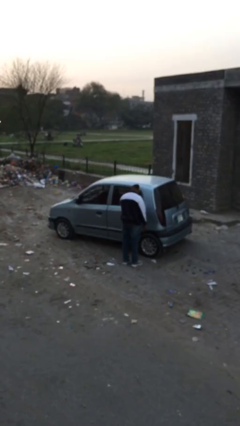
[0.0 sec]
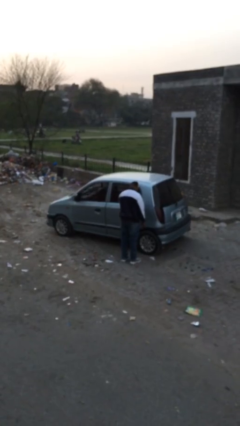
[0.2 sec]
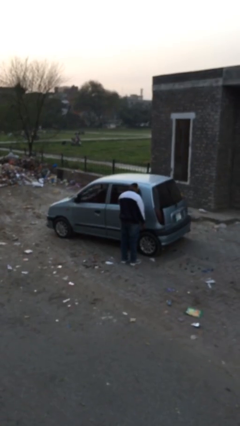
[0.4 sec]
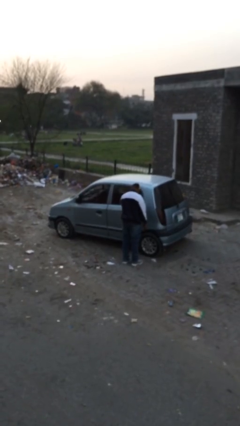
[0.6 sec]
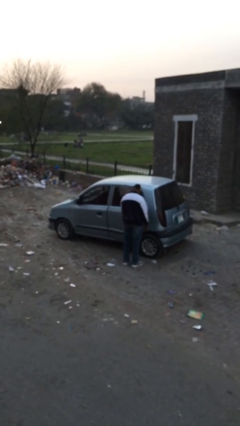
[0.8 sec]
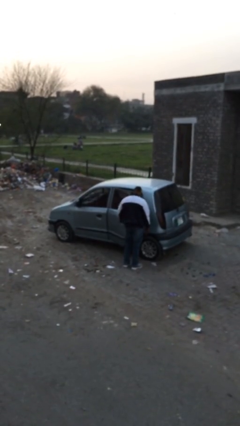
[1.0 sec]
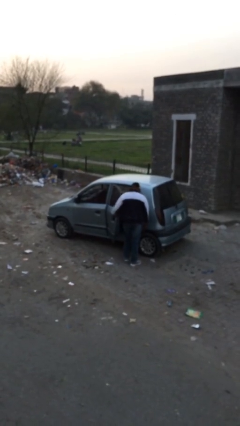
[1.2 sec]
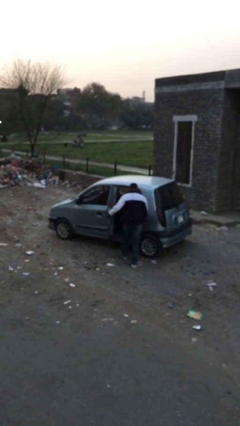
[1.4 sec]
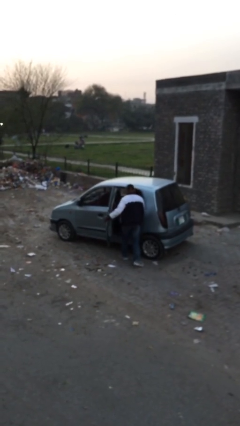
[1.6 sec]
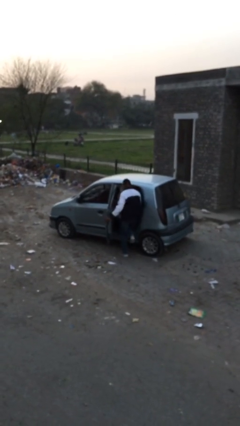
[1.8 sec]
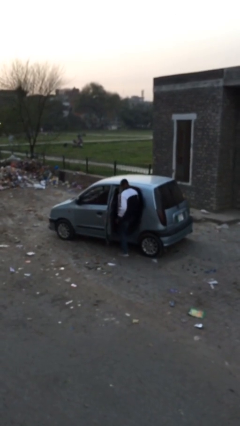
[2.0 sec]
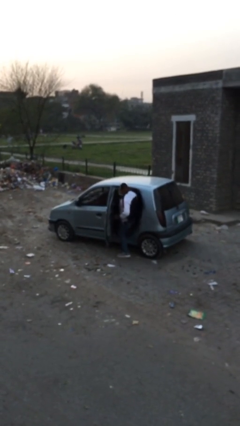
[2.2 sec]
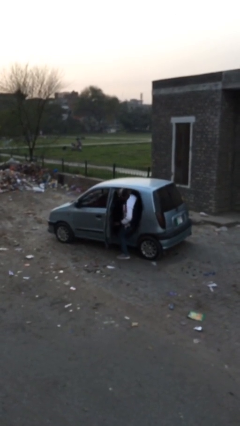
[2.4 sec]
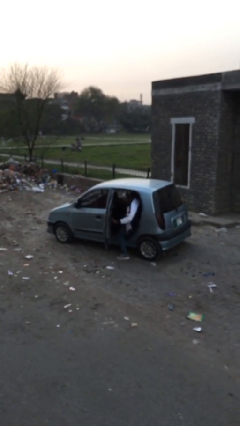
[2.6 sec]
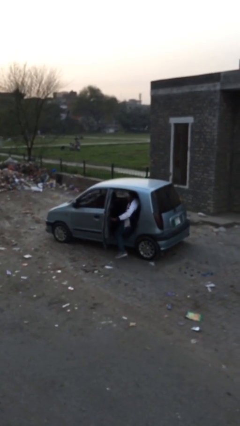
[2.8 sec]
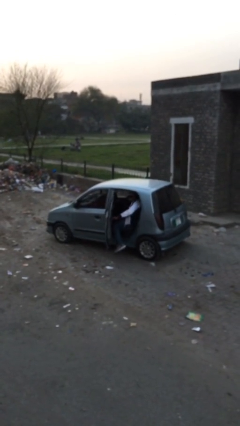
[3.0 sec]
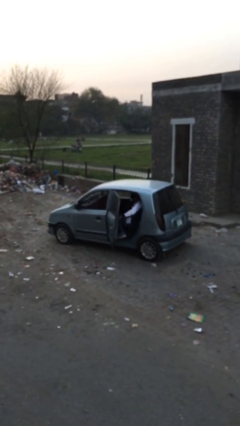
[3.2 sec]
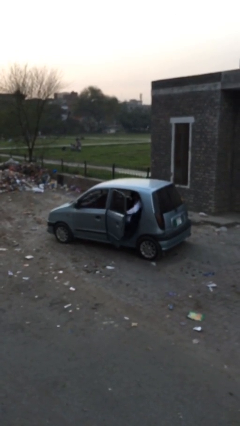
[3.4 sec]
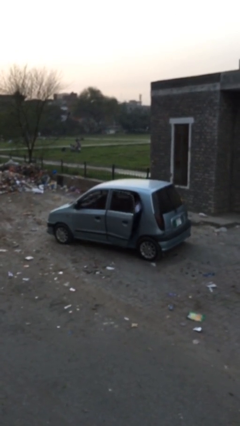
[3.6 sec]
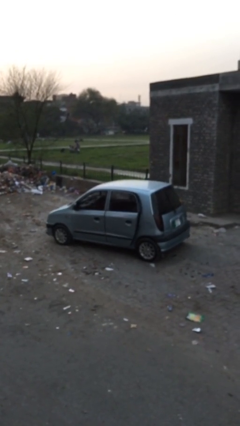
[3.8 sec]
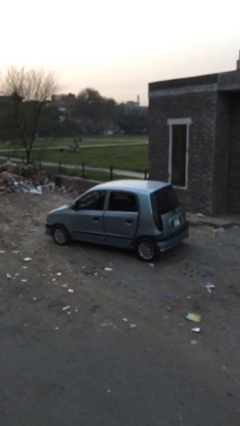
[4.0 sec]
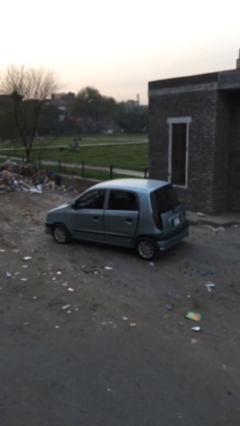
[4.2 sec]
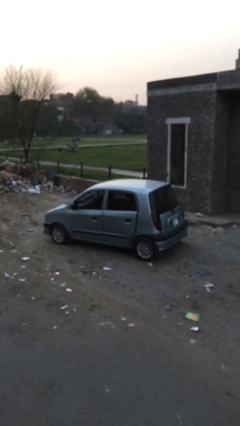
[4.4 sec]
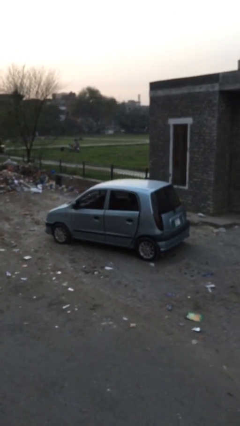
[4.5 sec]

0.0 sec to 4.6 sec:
car picks up person

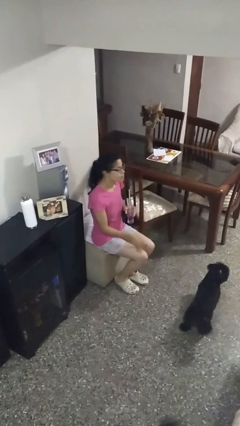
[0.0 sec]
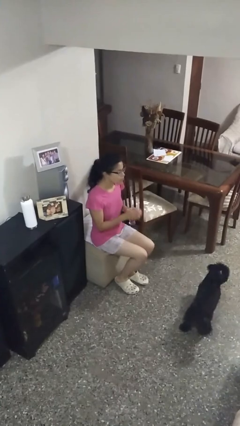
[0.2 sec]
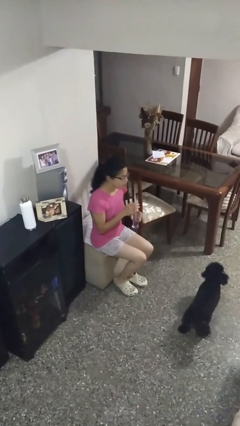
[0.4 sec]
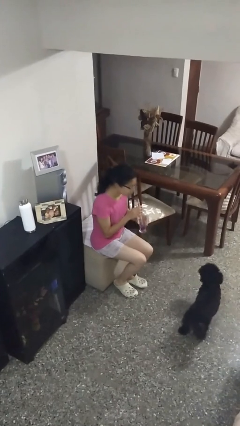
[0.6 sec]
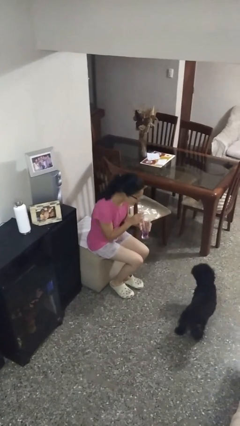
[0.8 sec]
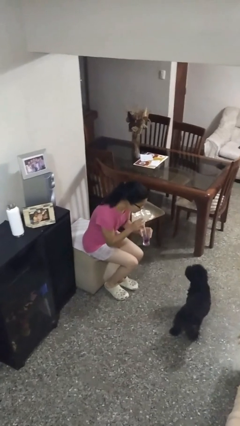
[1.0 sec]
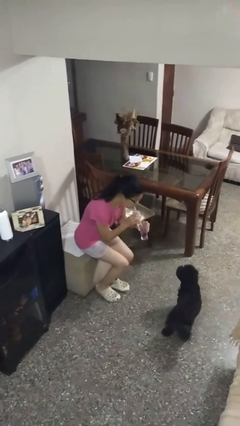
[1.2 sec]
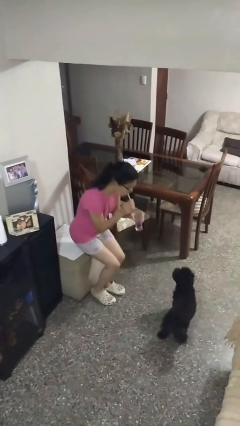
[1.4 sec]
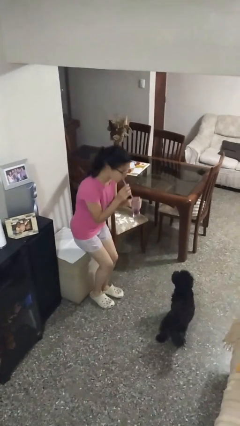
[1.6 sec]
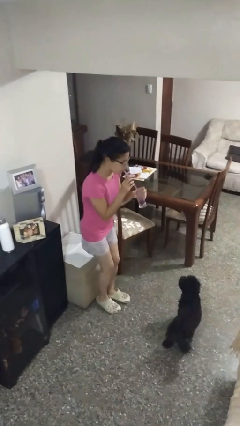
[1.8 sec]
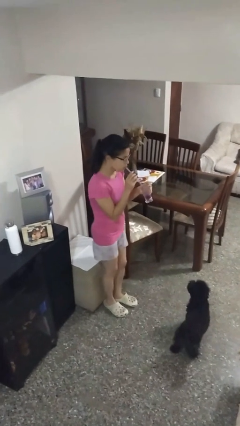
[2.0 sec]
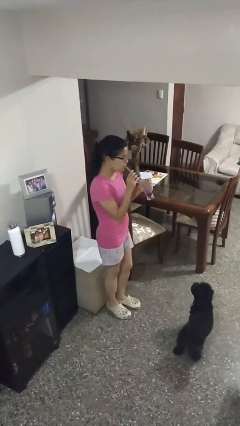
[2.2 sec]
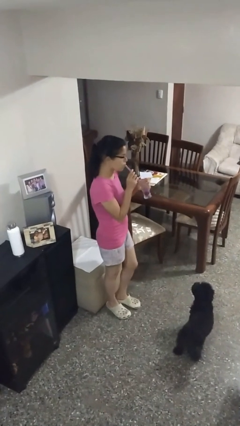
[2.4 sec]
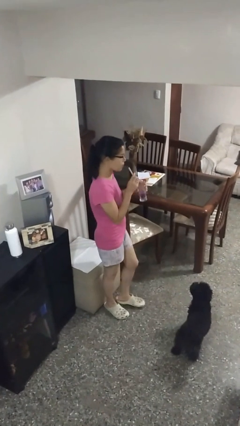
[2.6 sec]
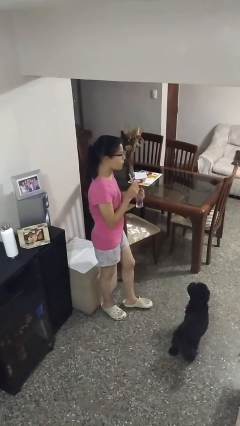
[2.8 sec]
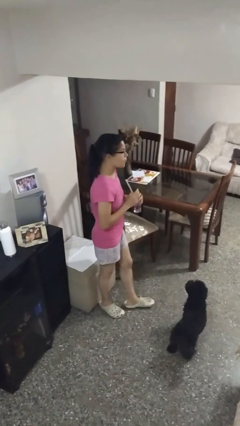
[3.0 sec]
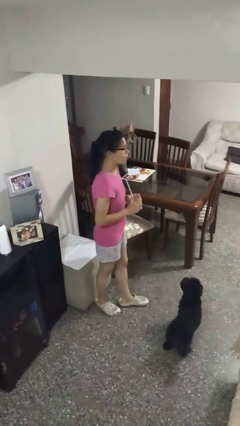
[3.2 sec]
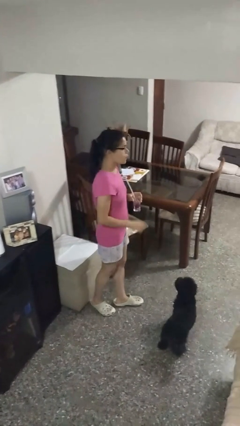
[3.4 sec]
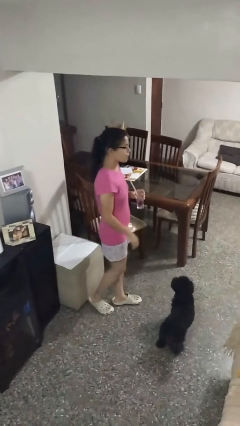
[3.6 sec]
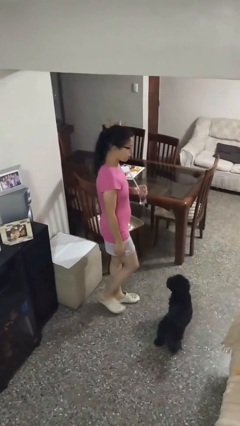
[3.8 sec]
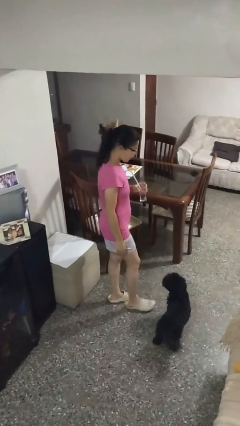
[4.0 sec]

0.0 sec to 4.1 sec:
person drinks from straw

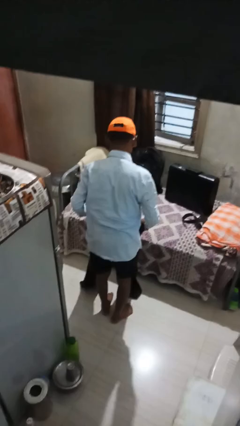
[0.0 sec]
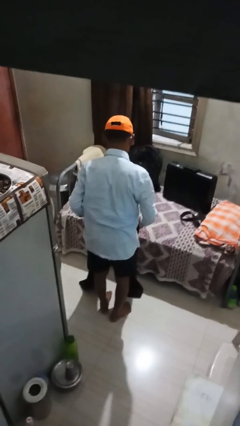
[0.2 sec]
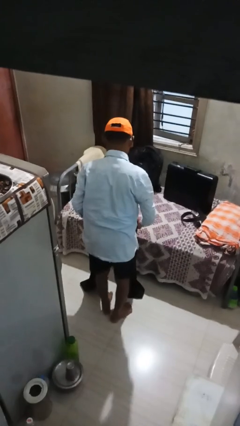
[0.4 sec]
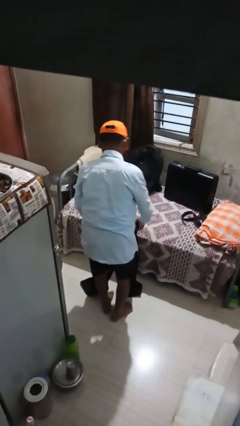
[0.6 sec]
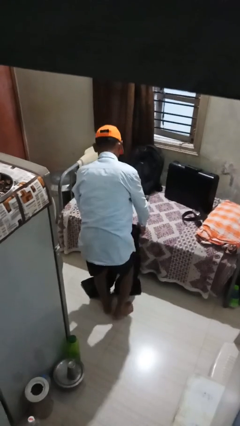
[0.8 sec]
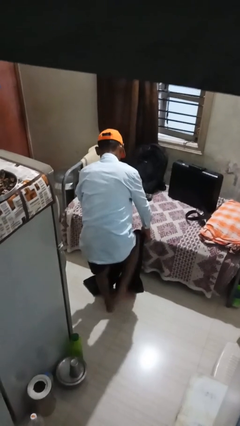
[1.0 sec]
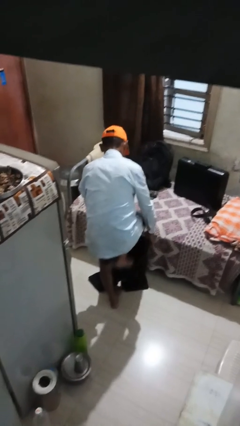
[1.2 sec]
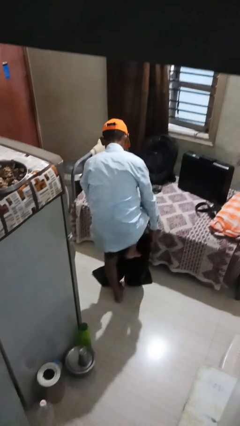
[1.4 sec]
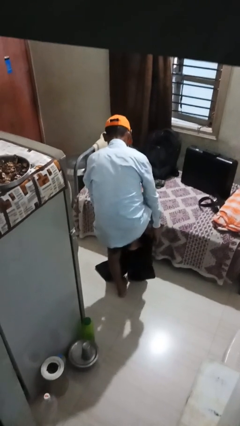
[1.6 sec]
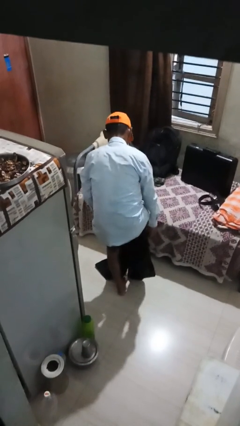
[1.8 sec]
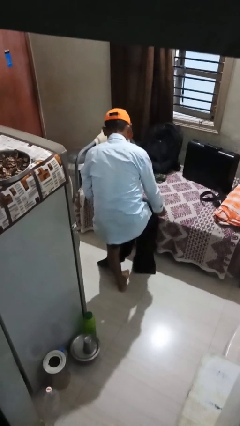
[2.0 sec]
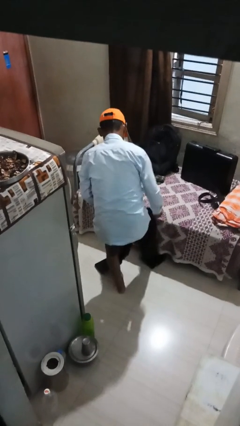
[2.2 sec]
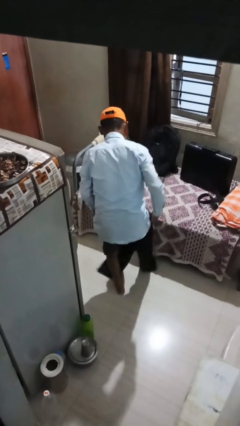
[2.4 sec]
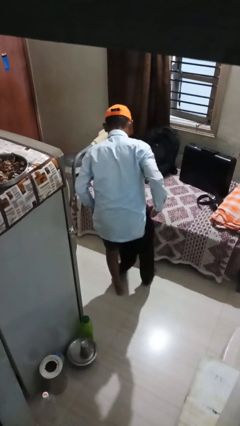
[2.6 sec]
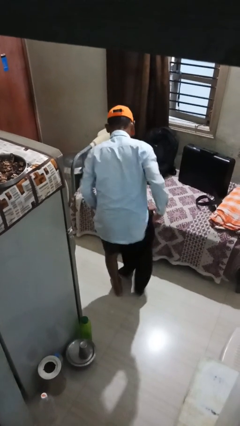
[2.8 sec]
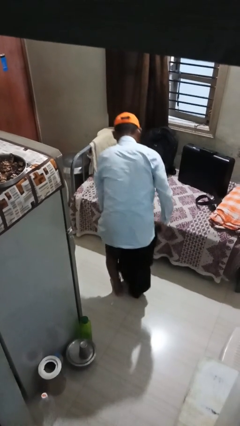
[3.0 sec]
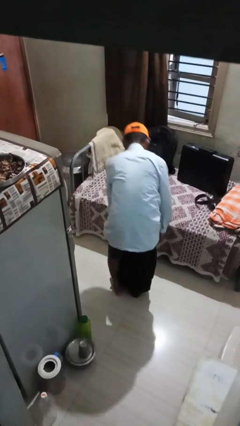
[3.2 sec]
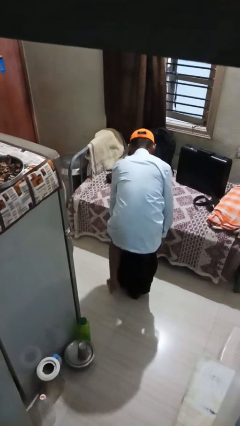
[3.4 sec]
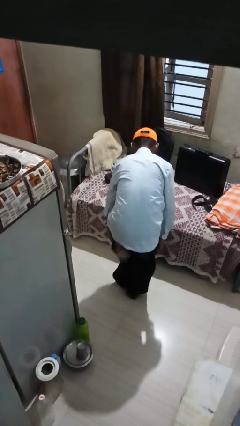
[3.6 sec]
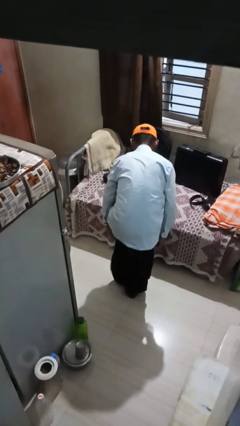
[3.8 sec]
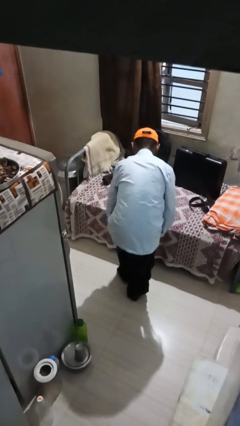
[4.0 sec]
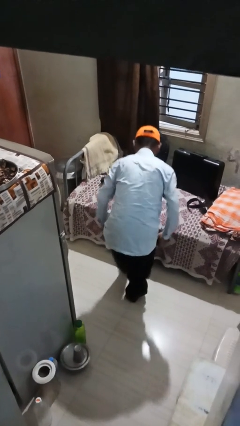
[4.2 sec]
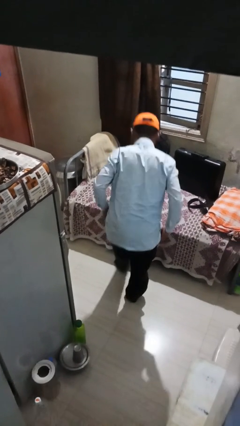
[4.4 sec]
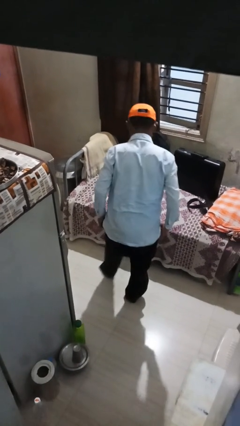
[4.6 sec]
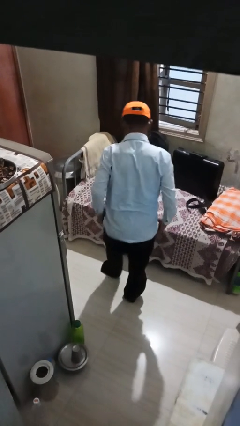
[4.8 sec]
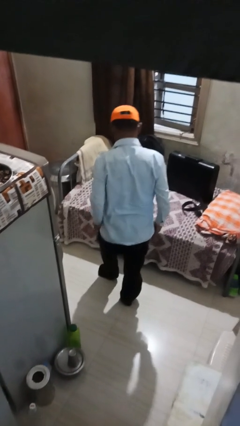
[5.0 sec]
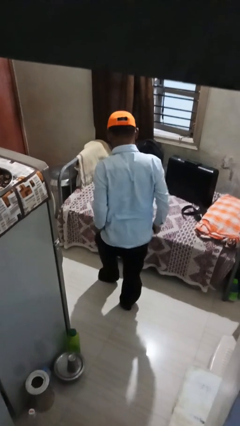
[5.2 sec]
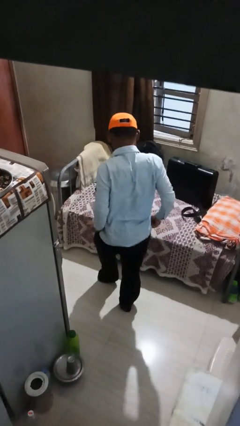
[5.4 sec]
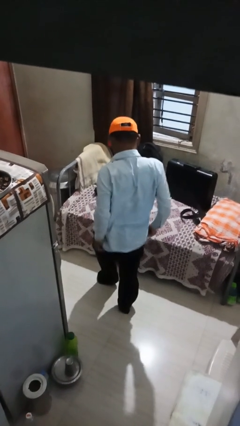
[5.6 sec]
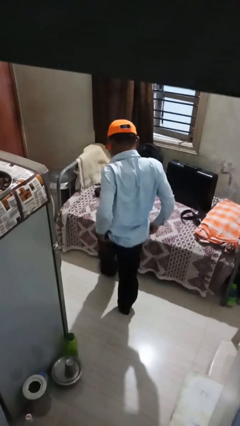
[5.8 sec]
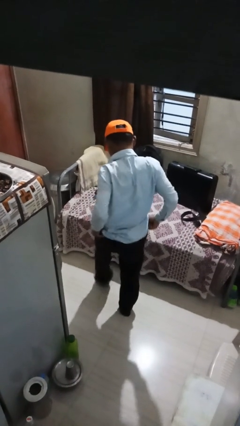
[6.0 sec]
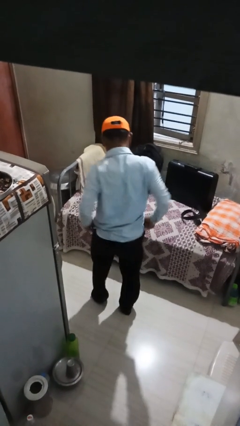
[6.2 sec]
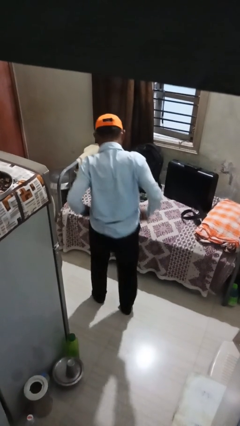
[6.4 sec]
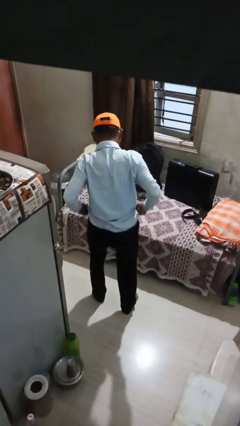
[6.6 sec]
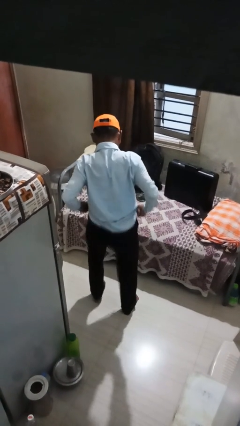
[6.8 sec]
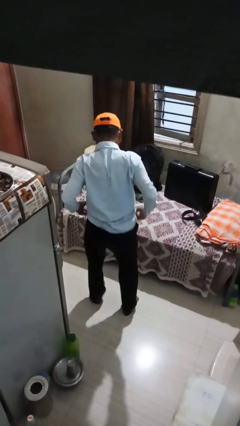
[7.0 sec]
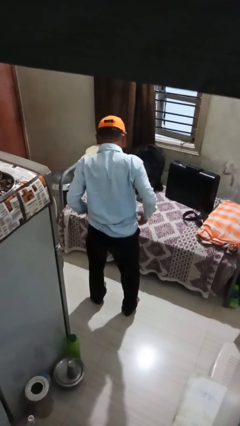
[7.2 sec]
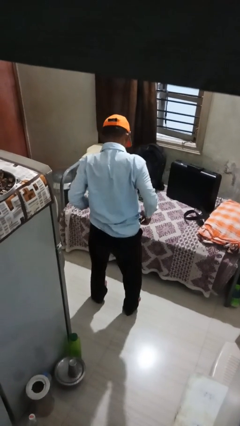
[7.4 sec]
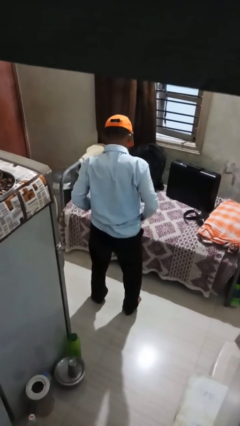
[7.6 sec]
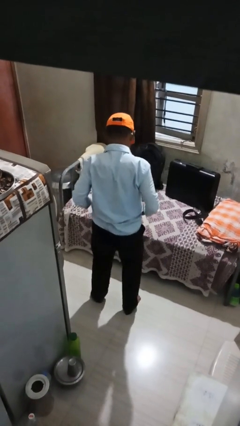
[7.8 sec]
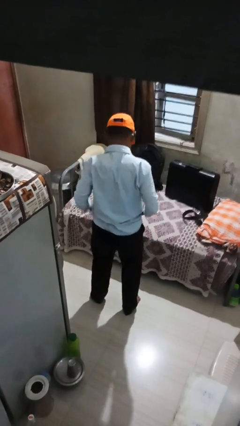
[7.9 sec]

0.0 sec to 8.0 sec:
person puts on pants

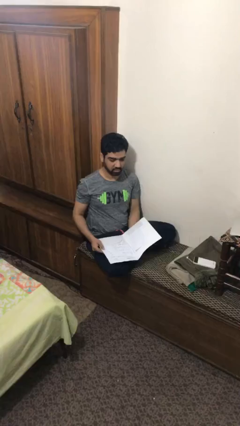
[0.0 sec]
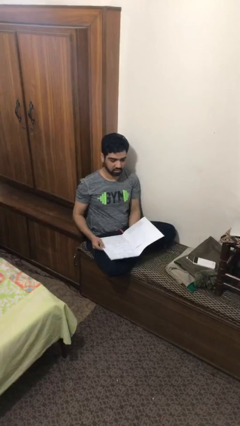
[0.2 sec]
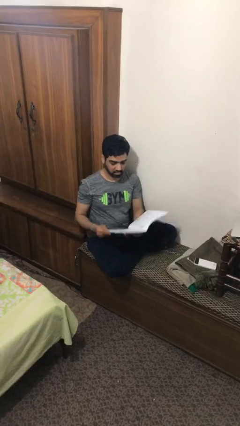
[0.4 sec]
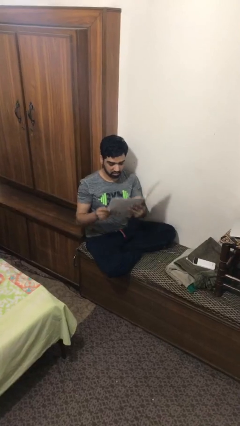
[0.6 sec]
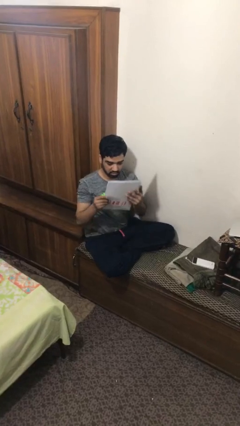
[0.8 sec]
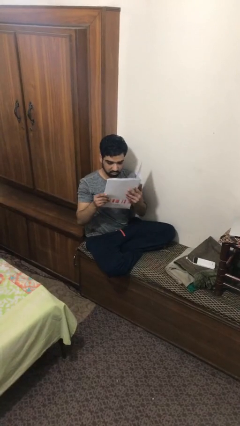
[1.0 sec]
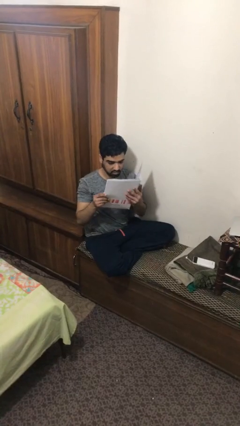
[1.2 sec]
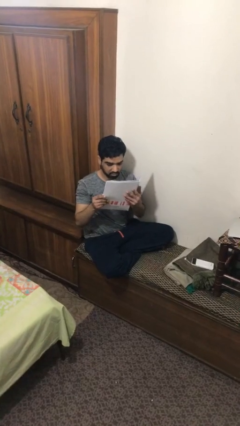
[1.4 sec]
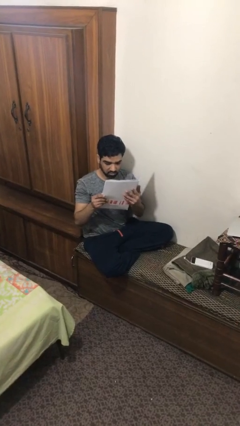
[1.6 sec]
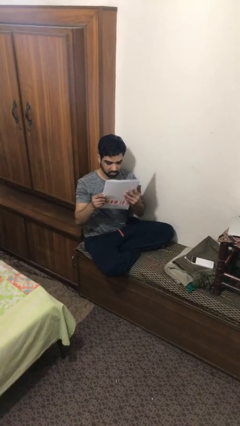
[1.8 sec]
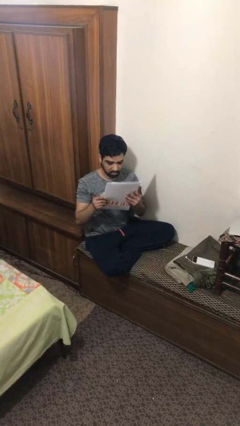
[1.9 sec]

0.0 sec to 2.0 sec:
person reads document
